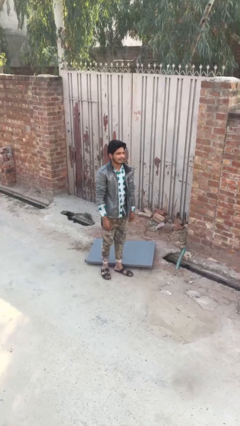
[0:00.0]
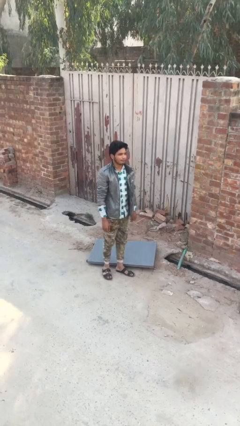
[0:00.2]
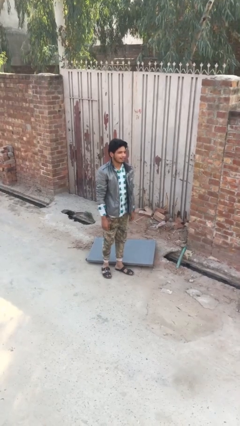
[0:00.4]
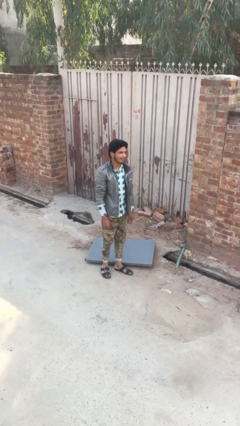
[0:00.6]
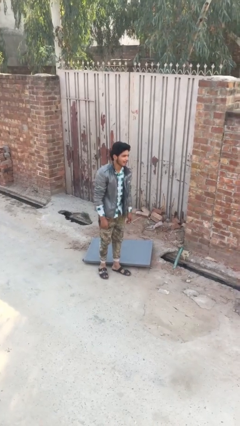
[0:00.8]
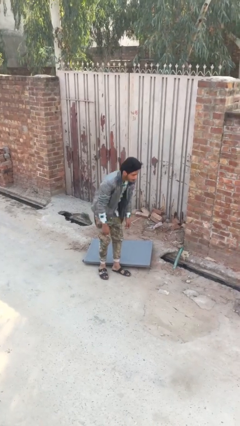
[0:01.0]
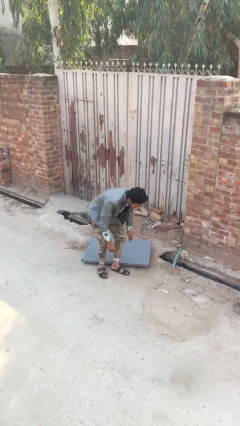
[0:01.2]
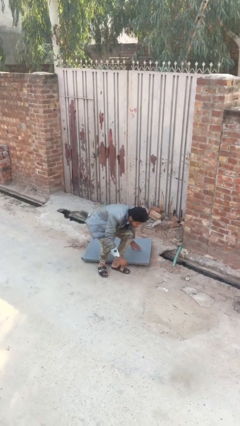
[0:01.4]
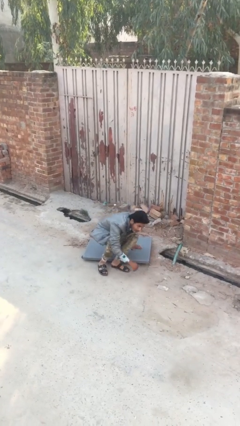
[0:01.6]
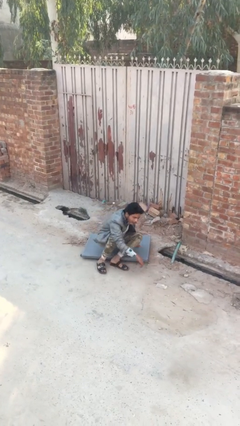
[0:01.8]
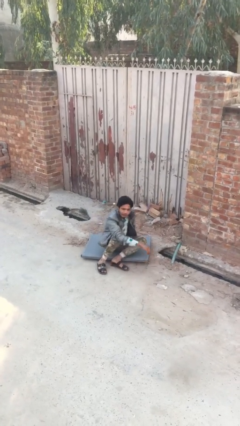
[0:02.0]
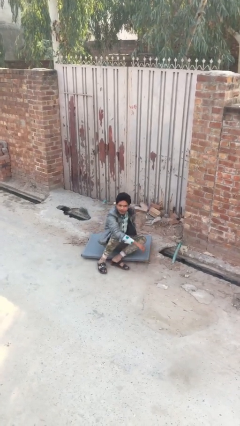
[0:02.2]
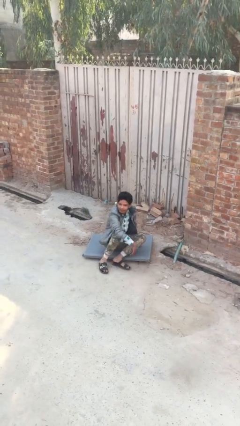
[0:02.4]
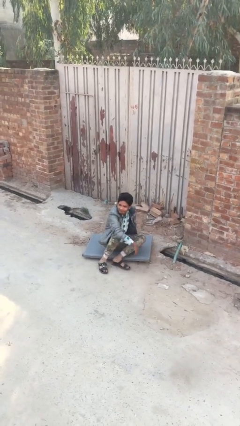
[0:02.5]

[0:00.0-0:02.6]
person sits down

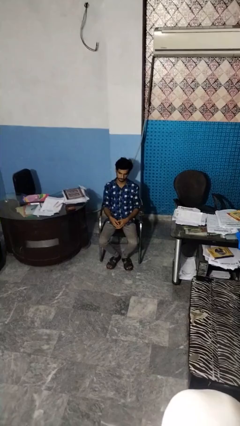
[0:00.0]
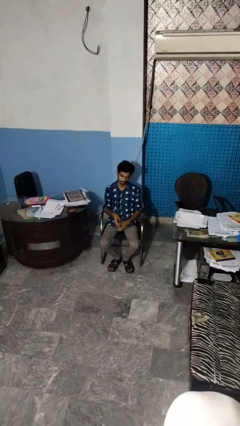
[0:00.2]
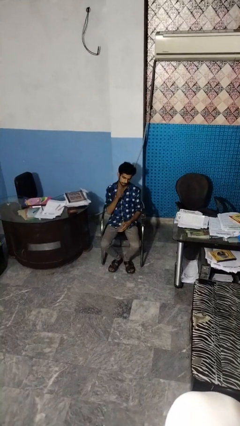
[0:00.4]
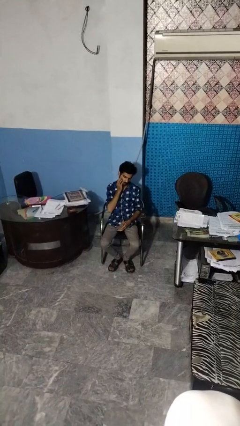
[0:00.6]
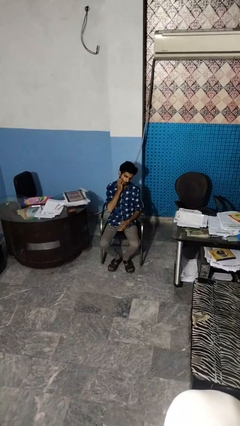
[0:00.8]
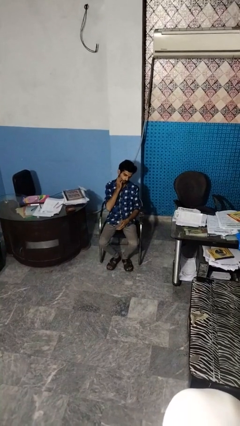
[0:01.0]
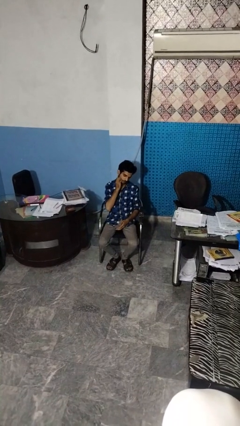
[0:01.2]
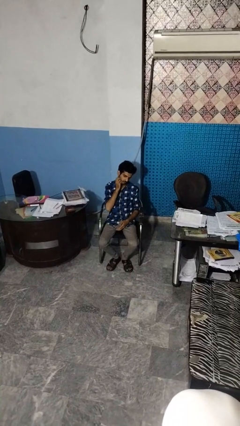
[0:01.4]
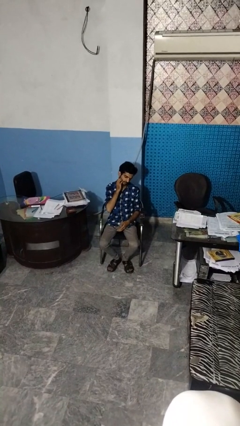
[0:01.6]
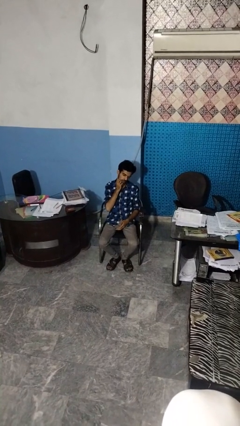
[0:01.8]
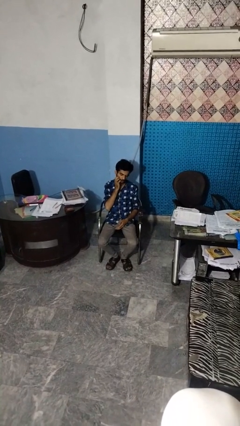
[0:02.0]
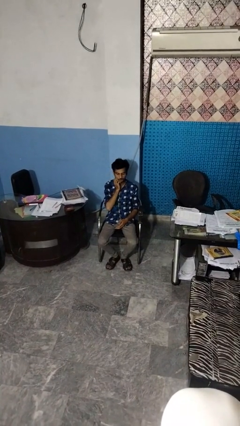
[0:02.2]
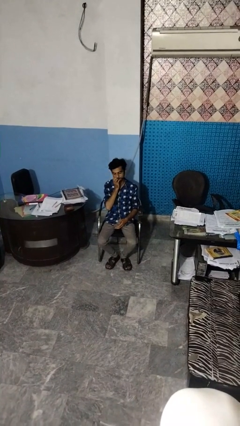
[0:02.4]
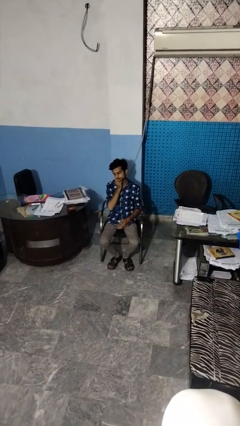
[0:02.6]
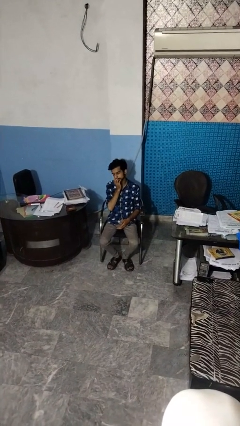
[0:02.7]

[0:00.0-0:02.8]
person scratches face

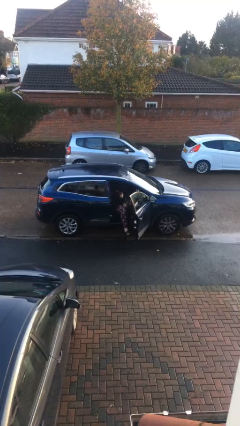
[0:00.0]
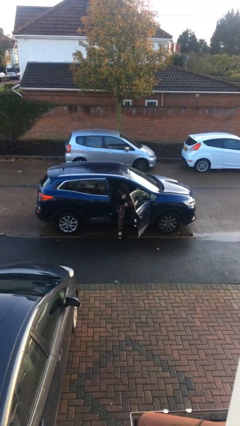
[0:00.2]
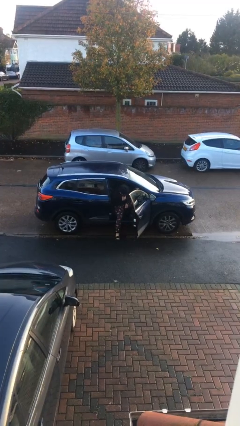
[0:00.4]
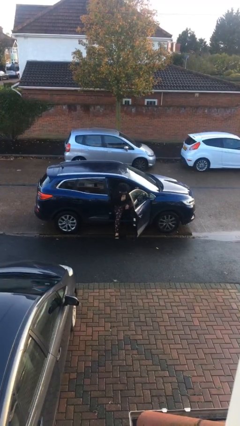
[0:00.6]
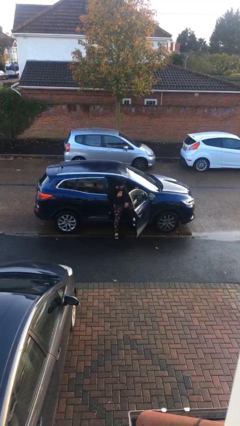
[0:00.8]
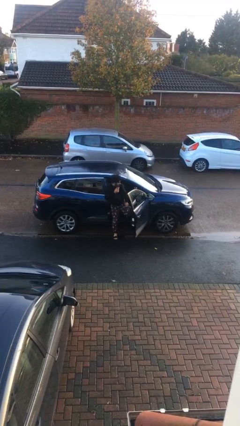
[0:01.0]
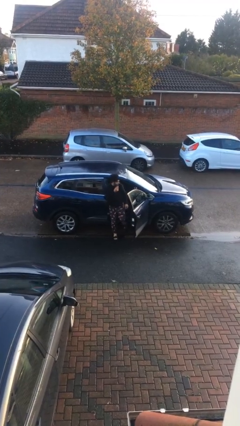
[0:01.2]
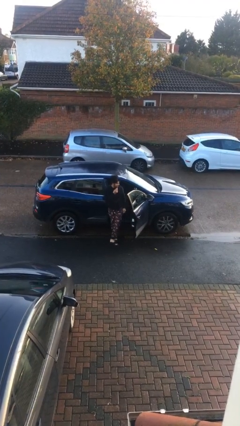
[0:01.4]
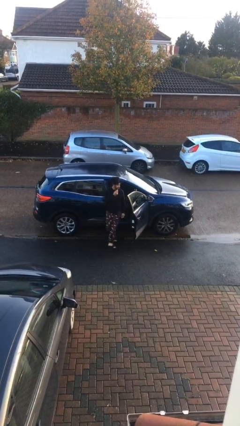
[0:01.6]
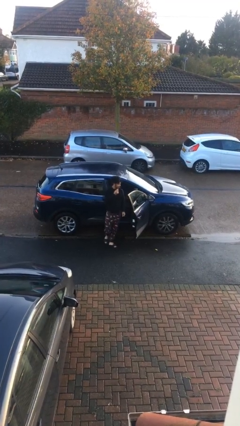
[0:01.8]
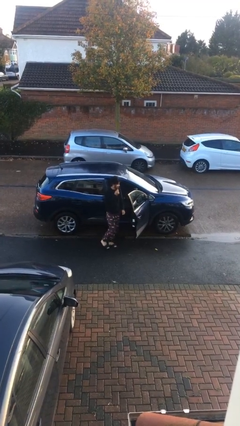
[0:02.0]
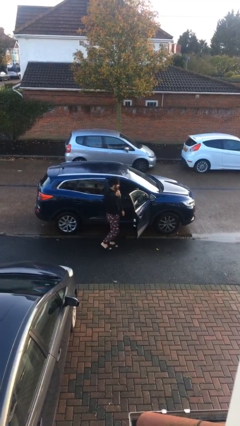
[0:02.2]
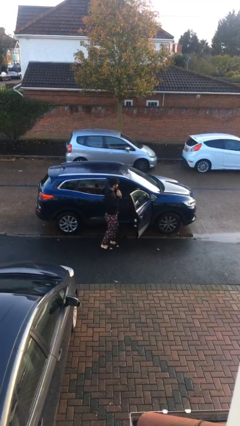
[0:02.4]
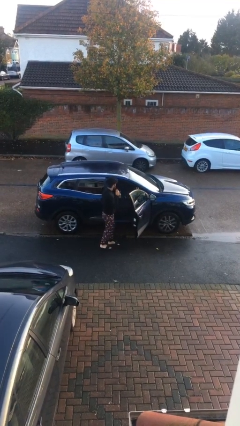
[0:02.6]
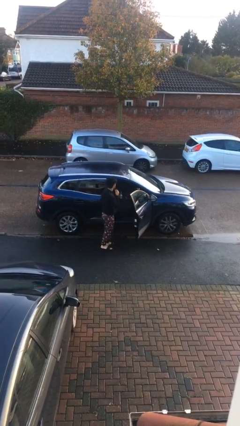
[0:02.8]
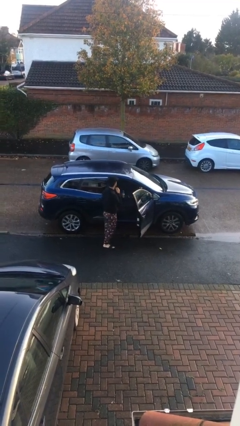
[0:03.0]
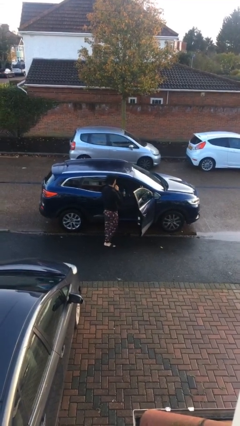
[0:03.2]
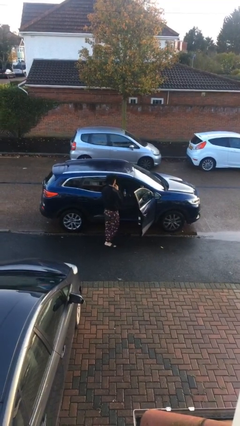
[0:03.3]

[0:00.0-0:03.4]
person exits car

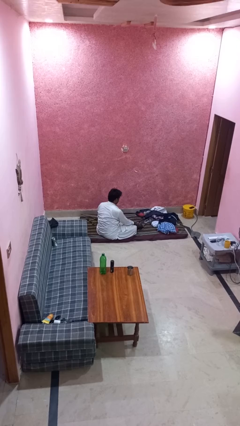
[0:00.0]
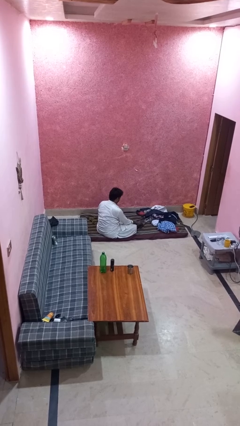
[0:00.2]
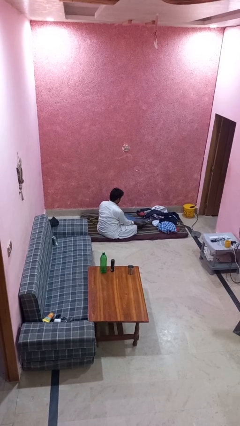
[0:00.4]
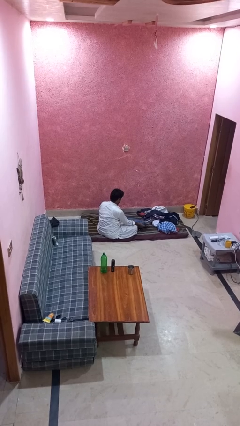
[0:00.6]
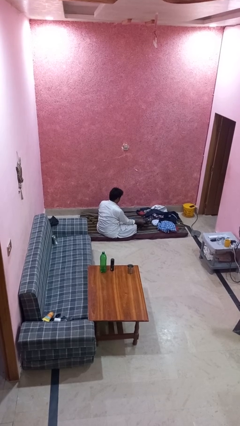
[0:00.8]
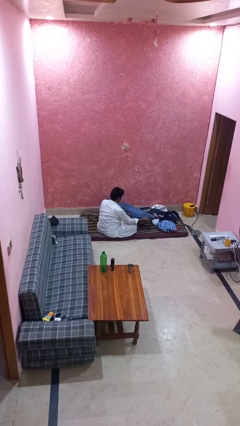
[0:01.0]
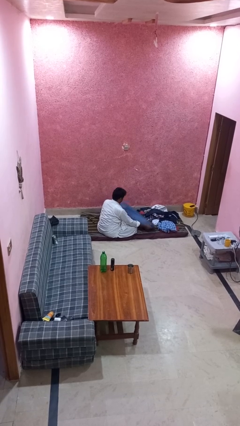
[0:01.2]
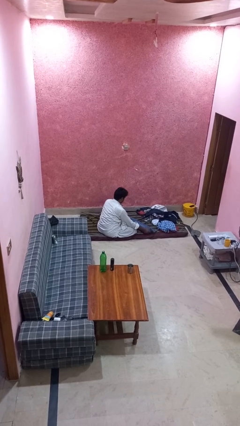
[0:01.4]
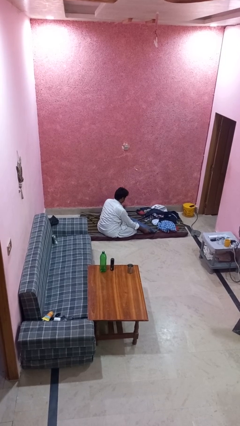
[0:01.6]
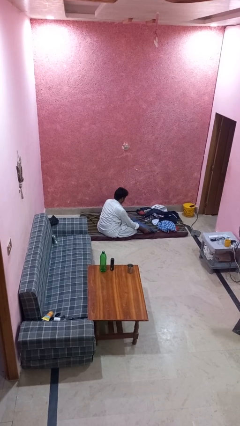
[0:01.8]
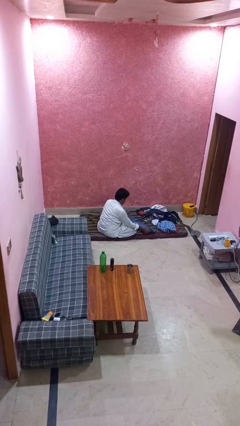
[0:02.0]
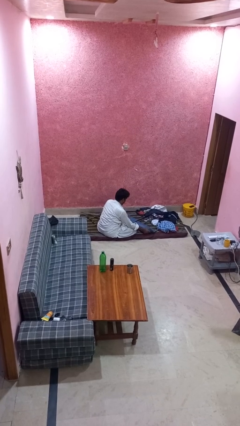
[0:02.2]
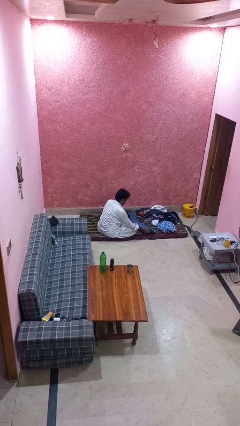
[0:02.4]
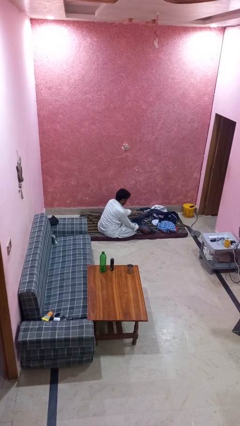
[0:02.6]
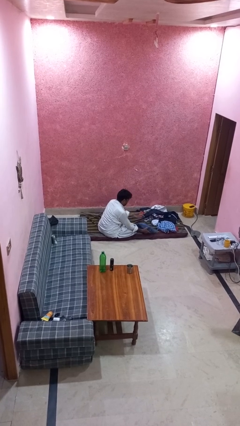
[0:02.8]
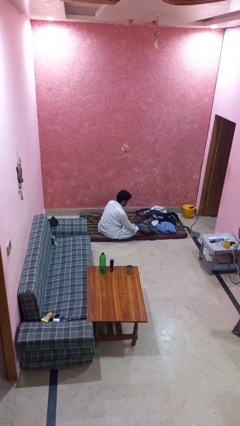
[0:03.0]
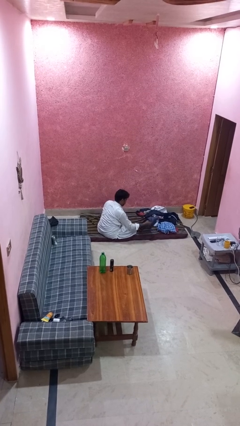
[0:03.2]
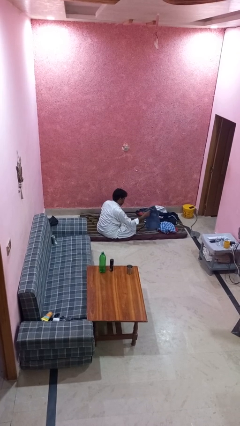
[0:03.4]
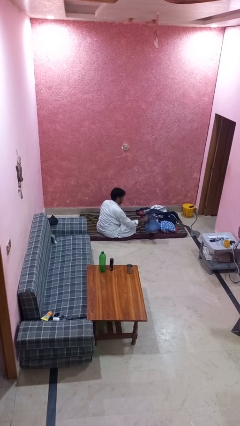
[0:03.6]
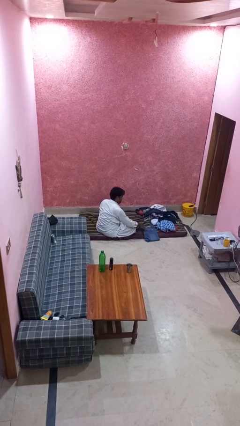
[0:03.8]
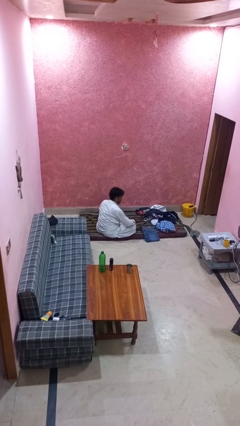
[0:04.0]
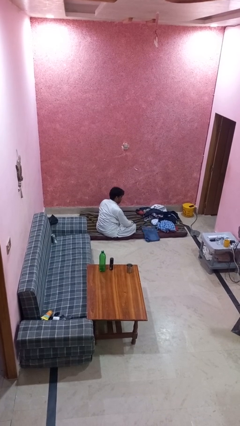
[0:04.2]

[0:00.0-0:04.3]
person folds pants

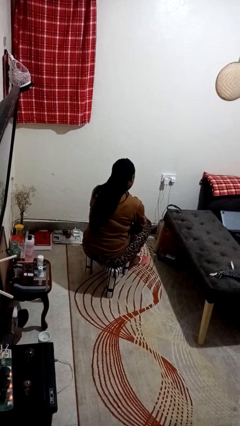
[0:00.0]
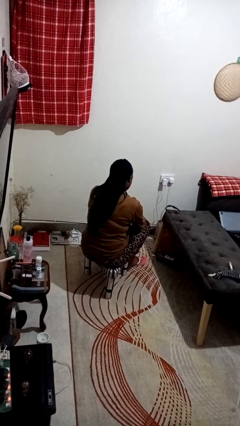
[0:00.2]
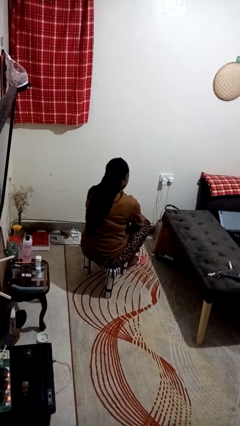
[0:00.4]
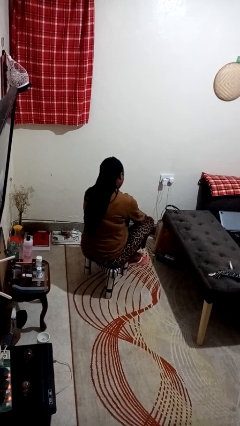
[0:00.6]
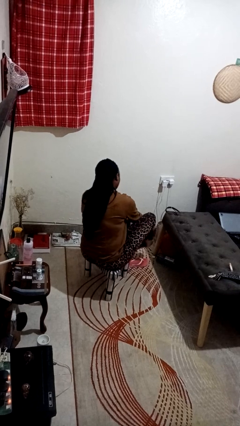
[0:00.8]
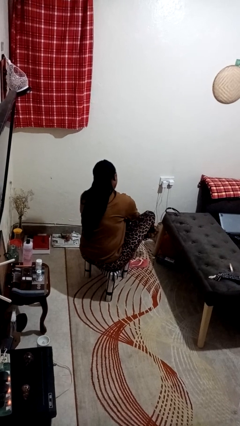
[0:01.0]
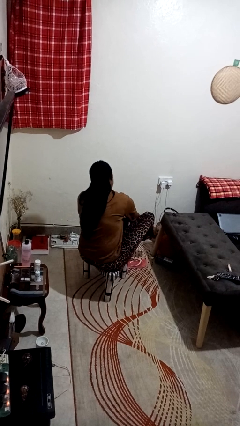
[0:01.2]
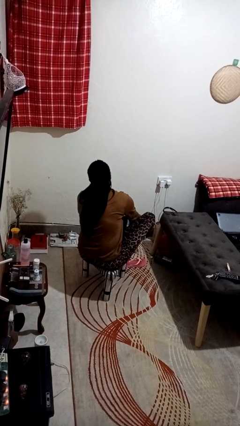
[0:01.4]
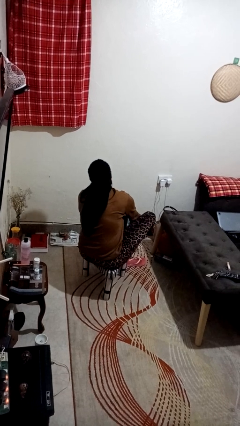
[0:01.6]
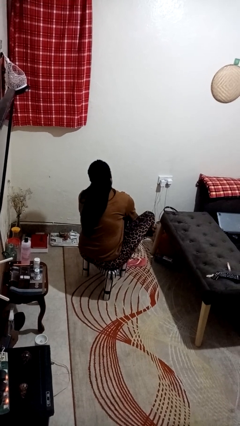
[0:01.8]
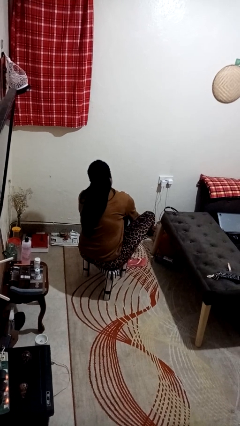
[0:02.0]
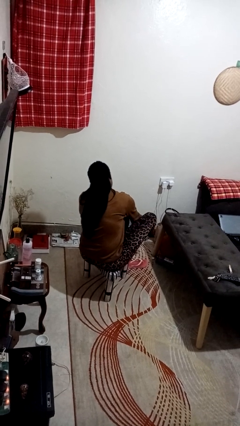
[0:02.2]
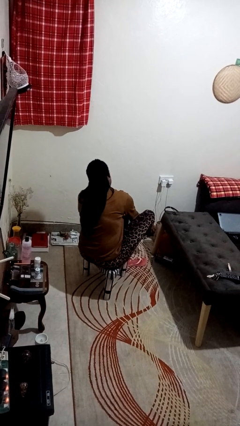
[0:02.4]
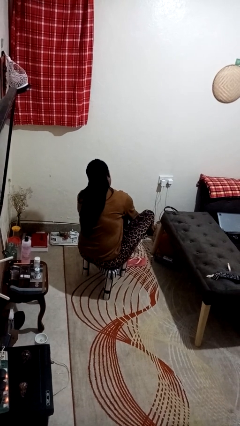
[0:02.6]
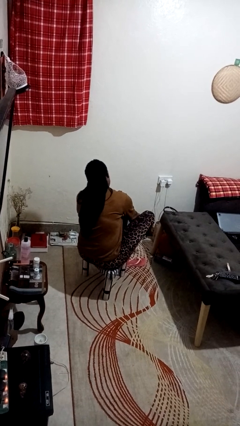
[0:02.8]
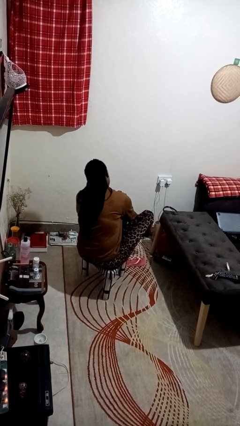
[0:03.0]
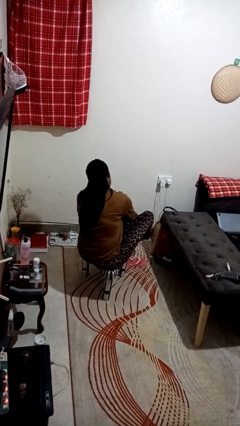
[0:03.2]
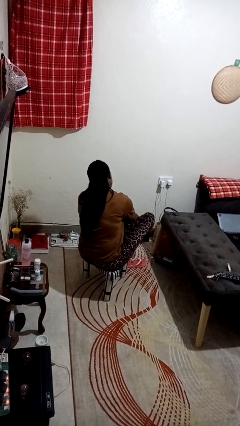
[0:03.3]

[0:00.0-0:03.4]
person rubs foot

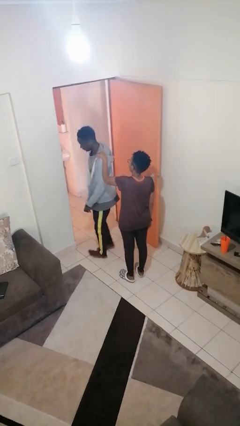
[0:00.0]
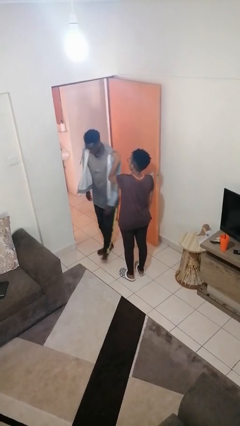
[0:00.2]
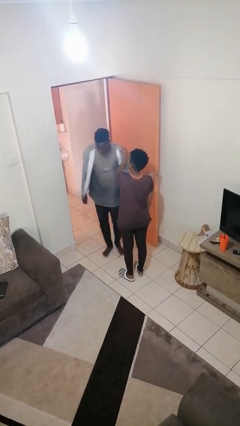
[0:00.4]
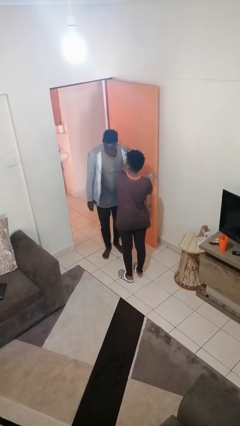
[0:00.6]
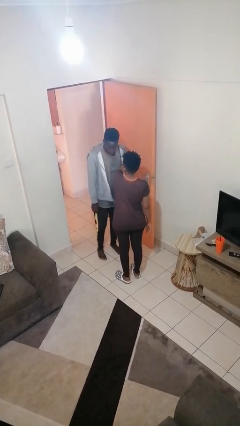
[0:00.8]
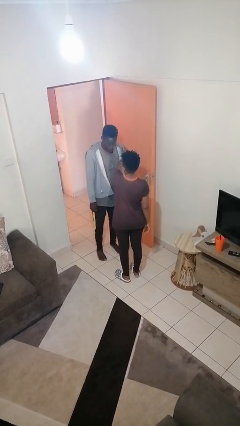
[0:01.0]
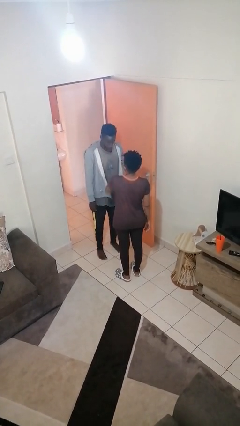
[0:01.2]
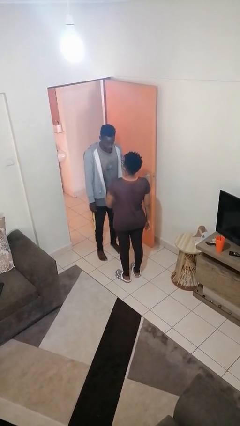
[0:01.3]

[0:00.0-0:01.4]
person spins person around
